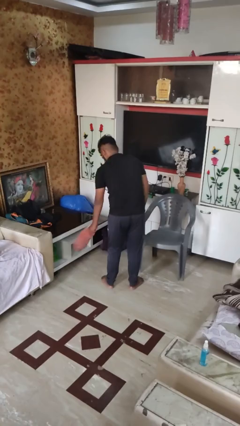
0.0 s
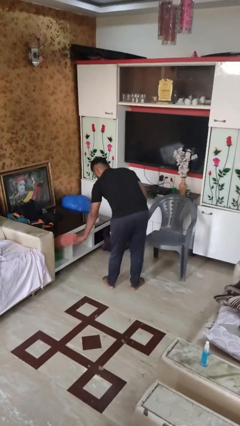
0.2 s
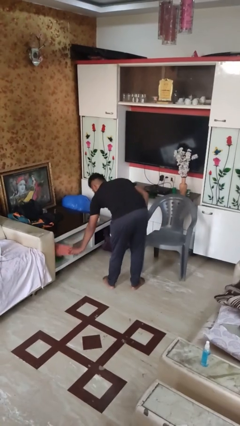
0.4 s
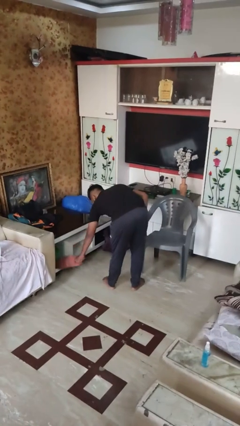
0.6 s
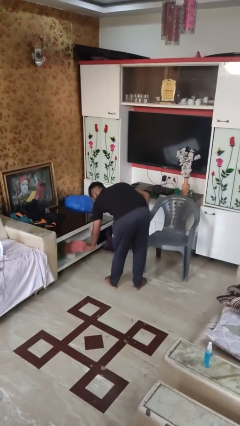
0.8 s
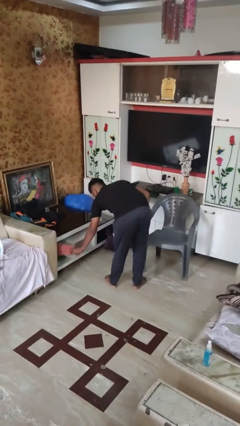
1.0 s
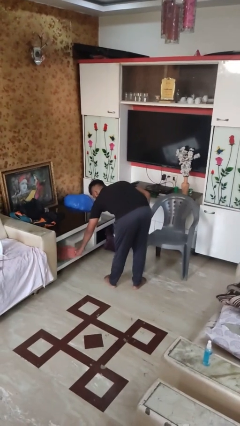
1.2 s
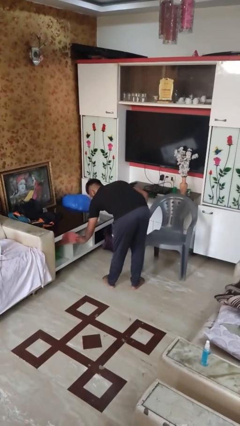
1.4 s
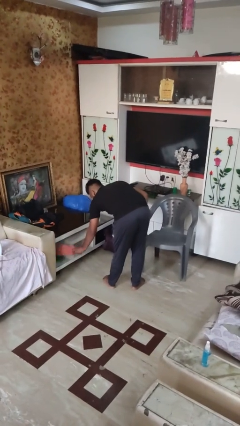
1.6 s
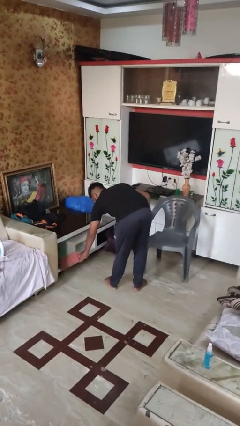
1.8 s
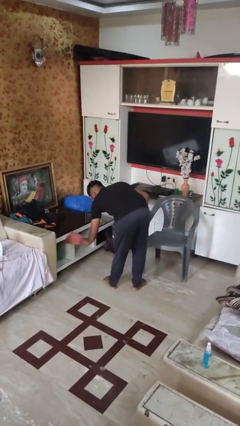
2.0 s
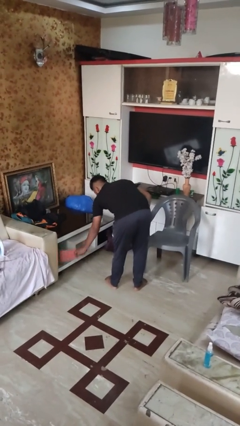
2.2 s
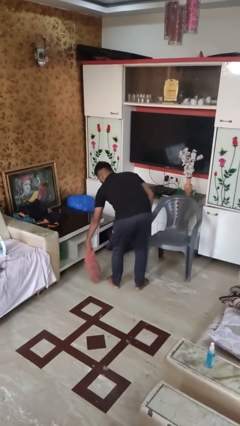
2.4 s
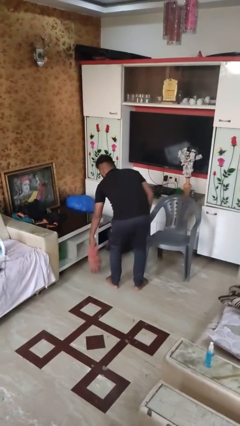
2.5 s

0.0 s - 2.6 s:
person dusts furniture

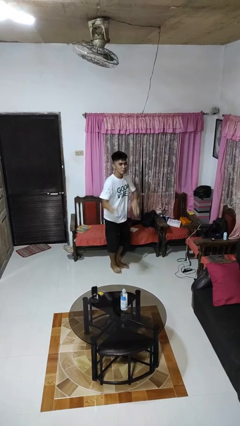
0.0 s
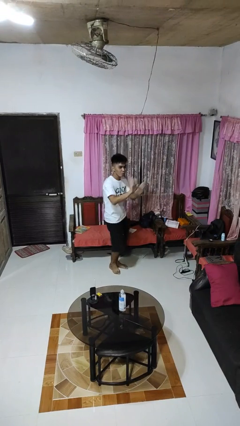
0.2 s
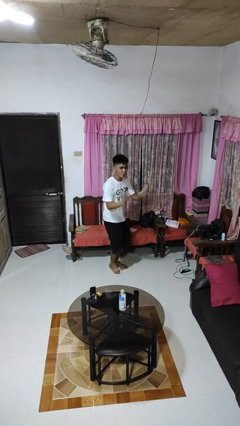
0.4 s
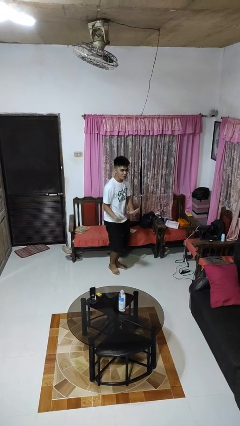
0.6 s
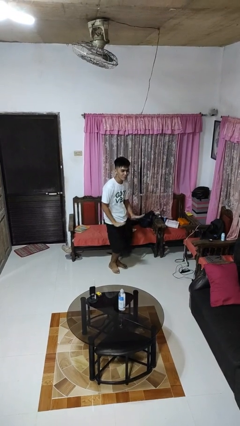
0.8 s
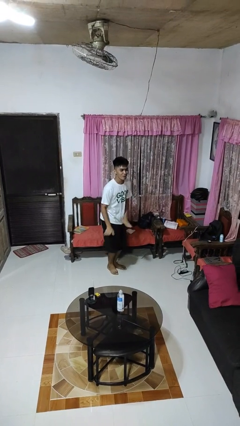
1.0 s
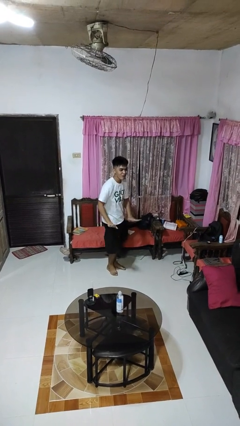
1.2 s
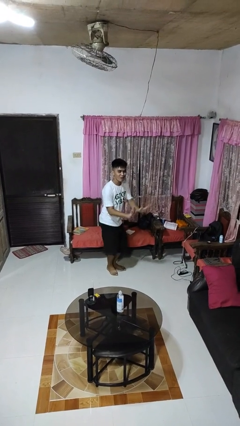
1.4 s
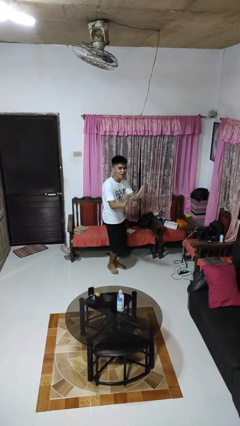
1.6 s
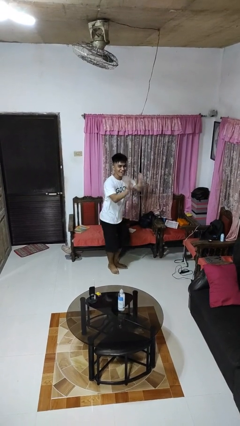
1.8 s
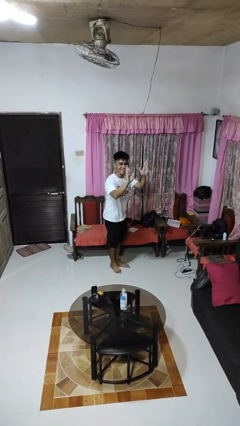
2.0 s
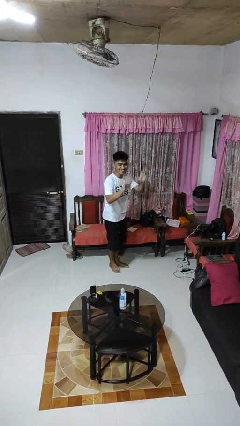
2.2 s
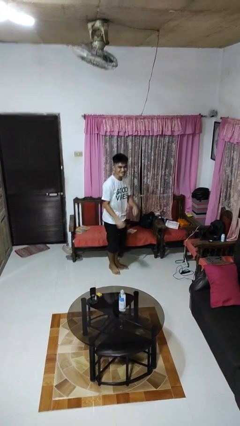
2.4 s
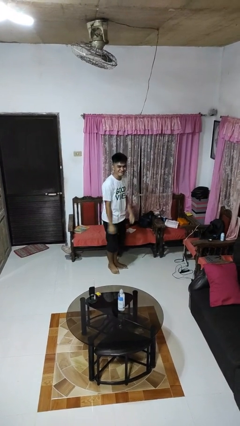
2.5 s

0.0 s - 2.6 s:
person dances in place

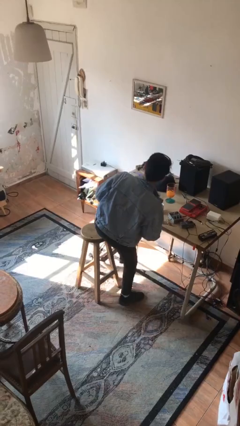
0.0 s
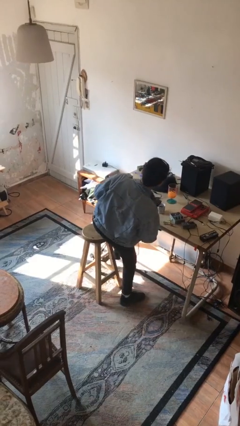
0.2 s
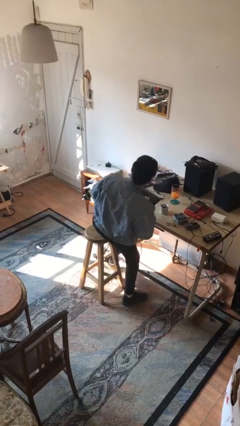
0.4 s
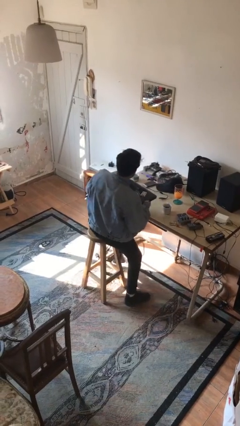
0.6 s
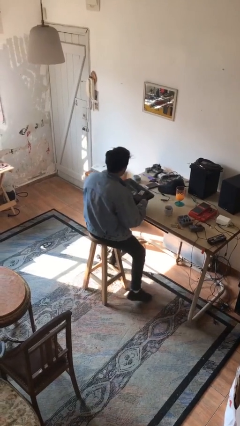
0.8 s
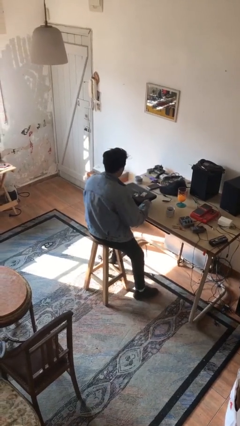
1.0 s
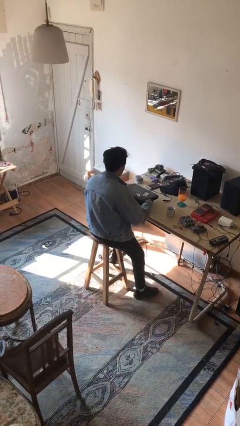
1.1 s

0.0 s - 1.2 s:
person sits down

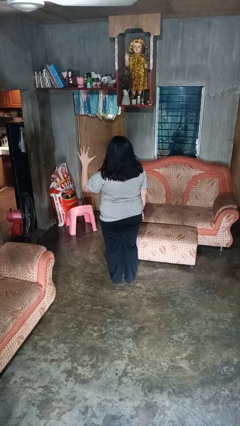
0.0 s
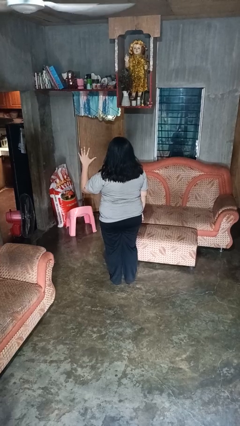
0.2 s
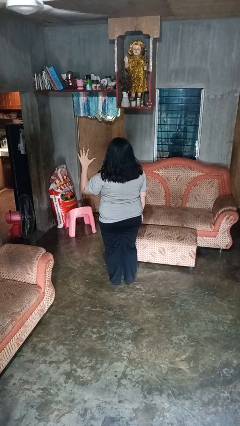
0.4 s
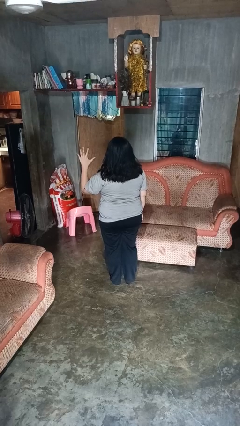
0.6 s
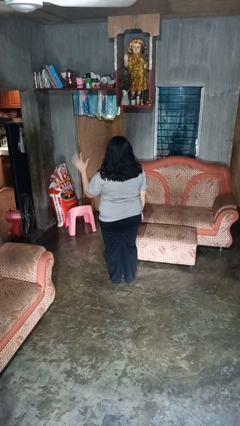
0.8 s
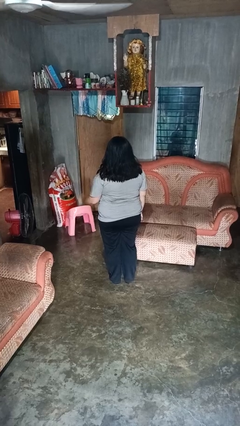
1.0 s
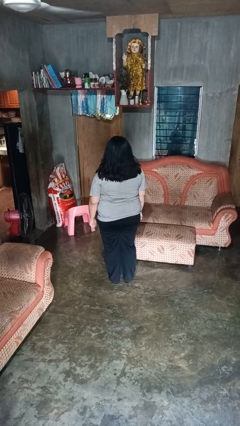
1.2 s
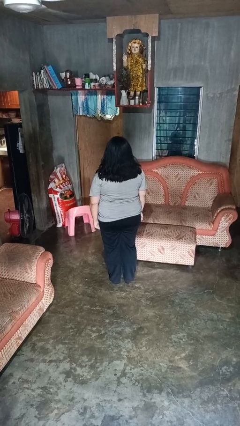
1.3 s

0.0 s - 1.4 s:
person gestures number five

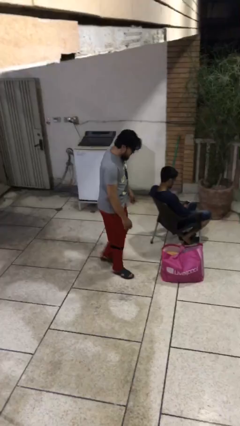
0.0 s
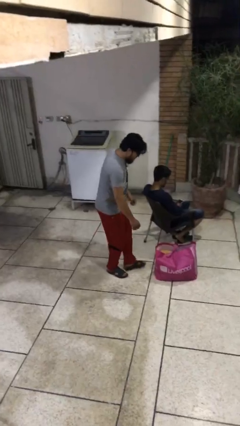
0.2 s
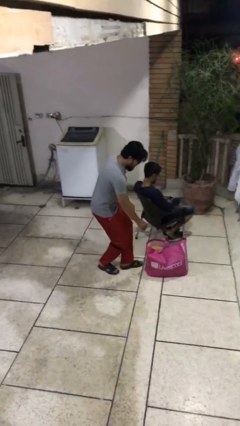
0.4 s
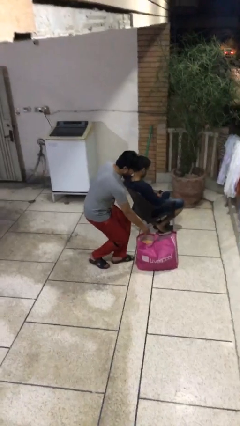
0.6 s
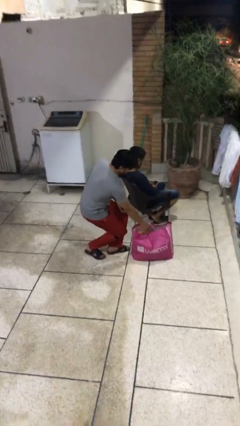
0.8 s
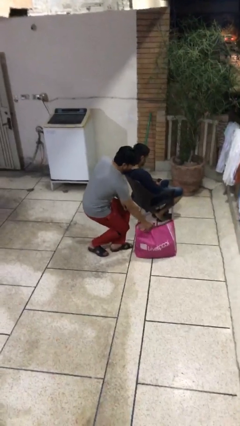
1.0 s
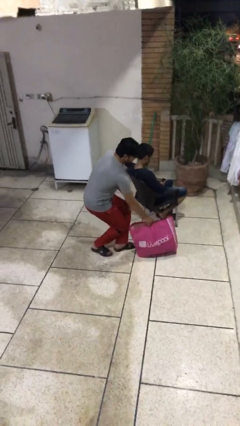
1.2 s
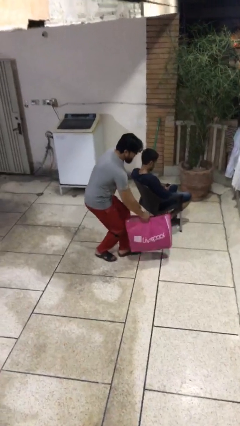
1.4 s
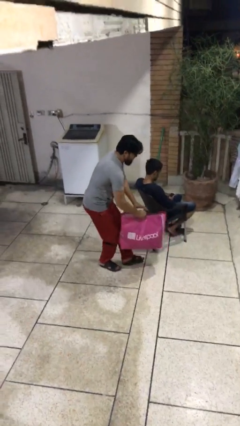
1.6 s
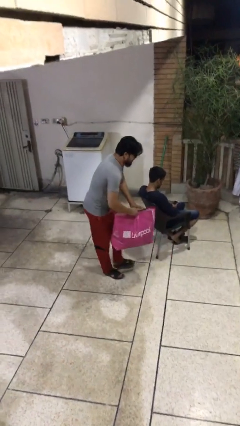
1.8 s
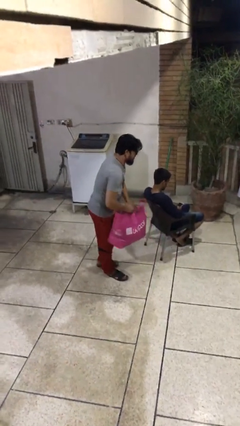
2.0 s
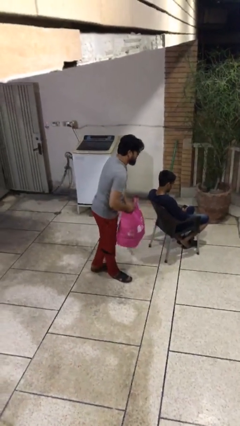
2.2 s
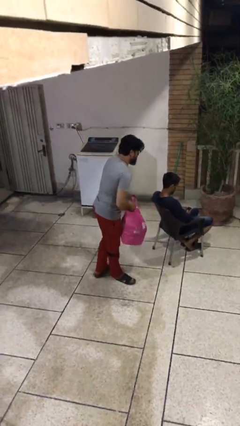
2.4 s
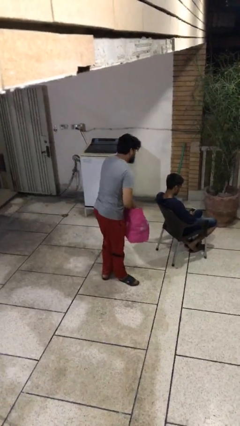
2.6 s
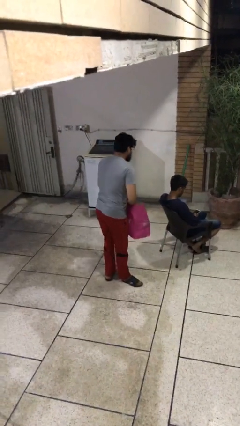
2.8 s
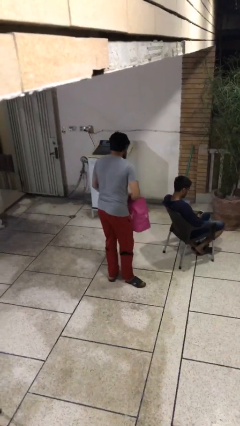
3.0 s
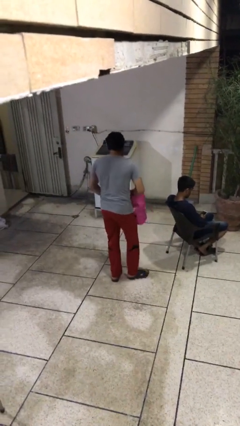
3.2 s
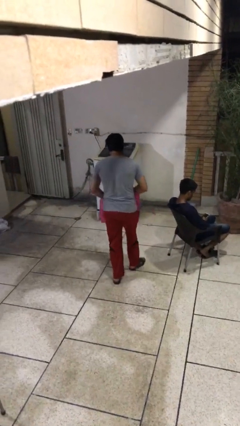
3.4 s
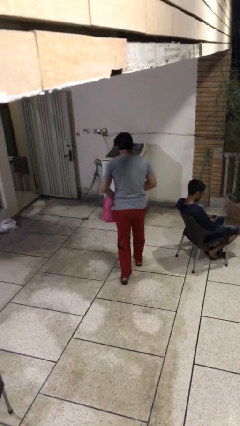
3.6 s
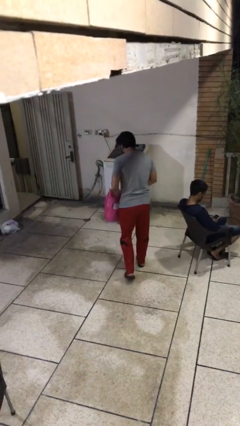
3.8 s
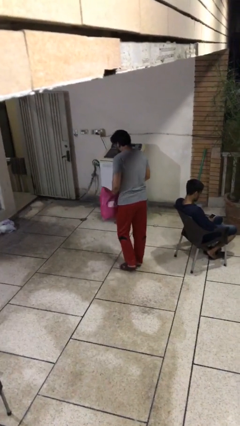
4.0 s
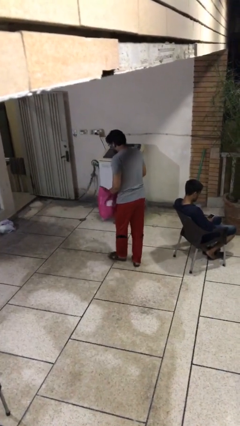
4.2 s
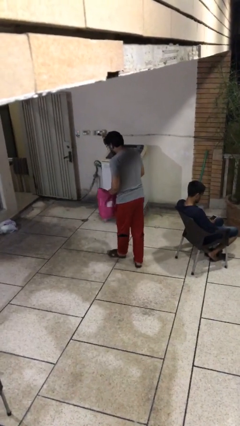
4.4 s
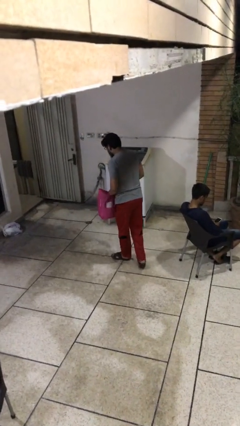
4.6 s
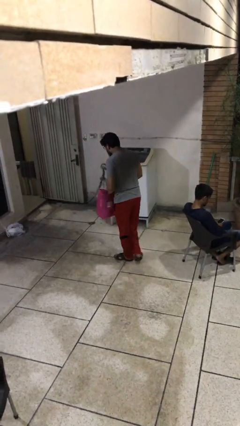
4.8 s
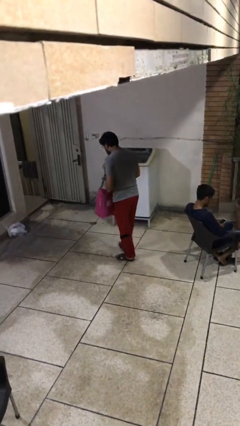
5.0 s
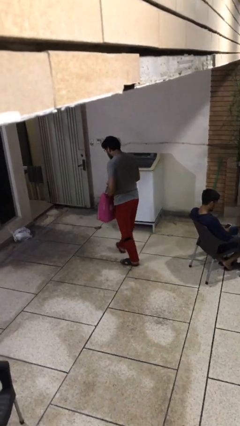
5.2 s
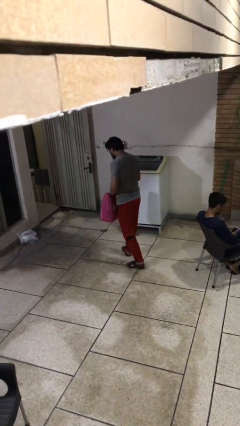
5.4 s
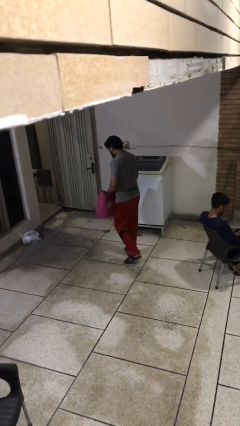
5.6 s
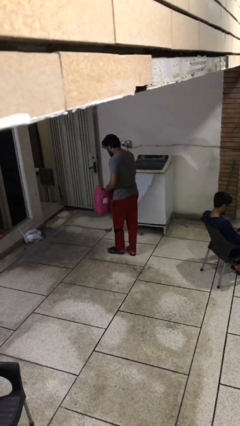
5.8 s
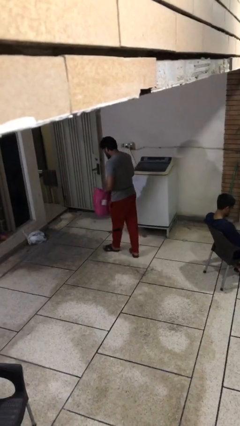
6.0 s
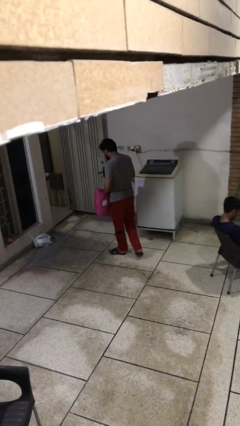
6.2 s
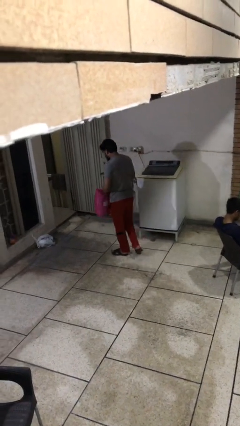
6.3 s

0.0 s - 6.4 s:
person steals object from person

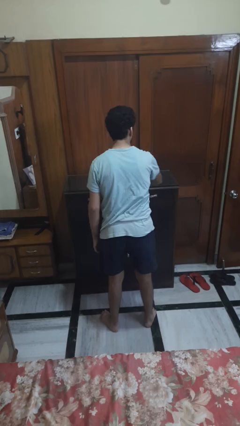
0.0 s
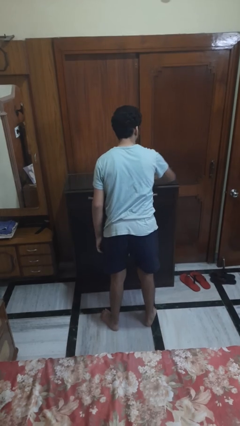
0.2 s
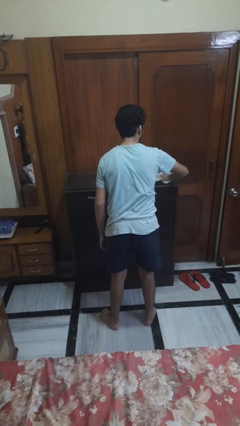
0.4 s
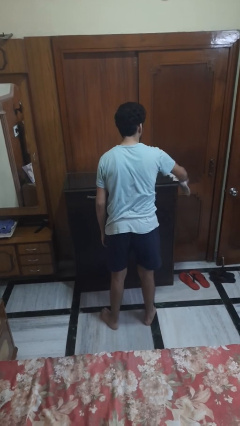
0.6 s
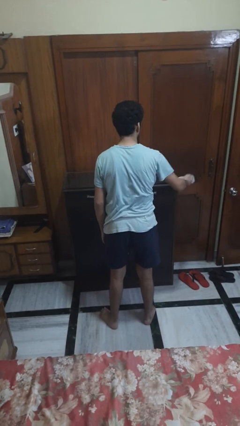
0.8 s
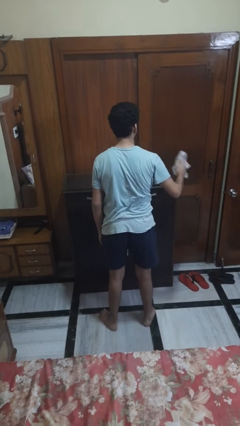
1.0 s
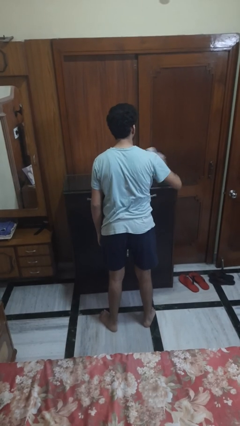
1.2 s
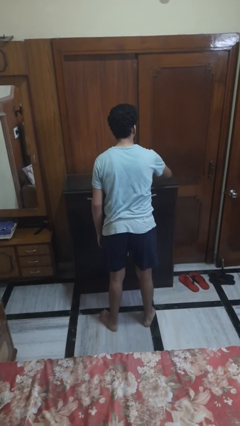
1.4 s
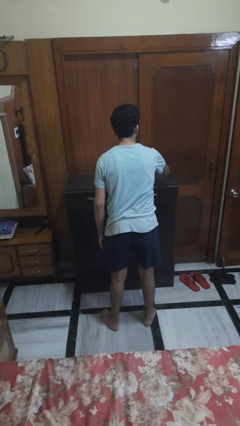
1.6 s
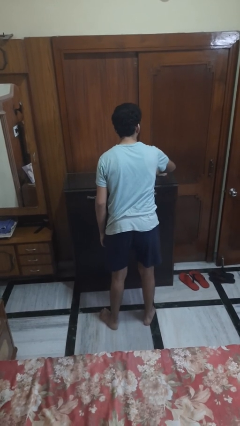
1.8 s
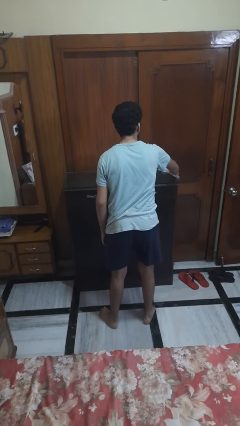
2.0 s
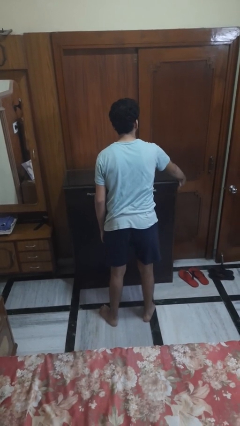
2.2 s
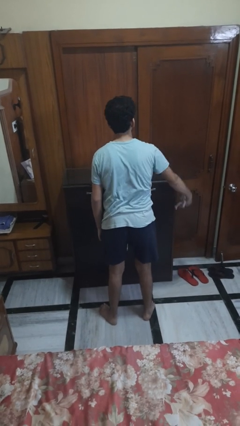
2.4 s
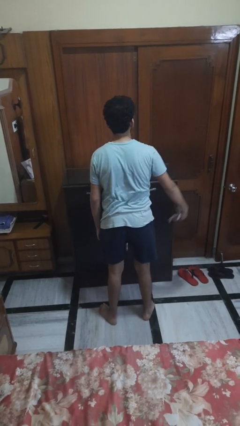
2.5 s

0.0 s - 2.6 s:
person cleans table with rag

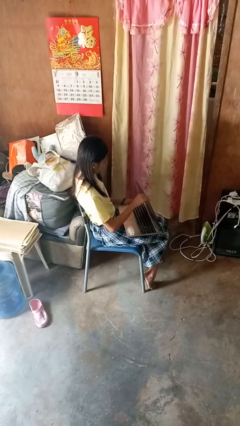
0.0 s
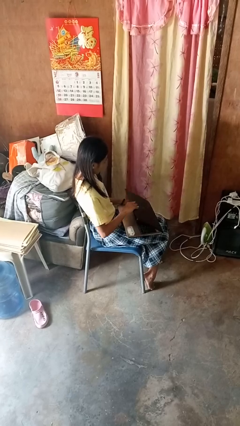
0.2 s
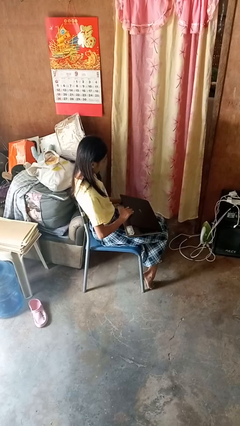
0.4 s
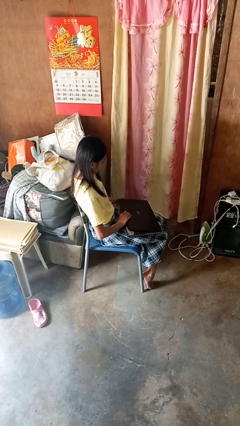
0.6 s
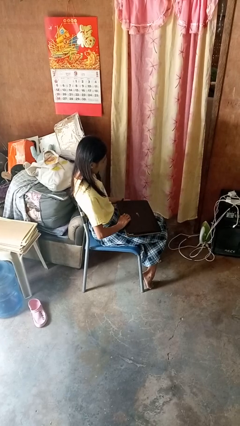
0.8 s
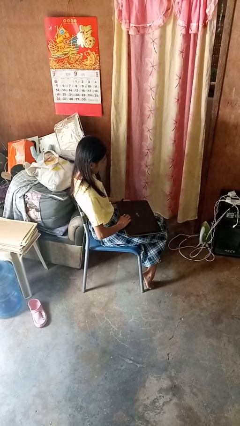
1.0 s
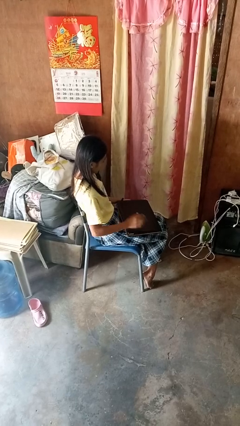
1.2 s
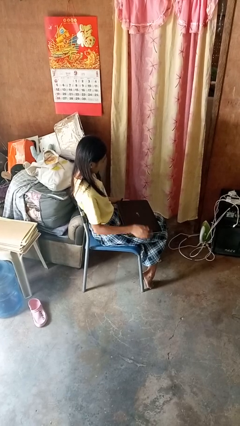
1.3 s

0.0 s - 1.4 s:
person closes laptop
